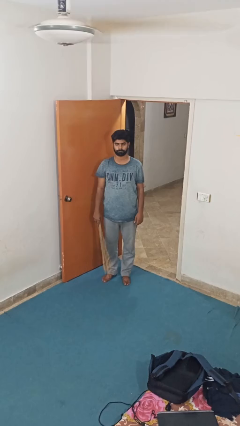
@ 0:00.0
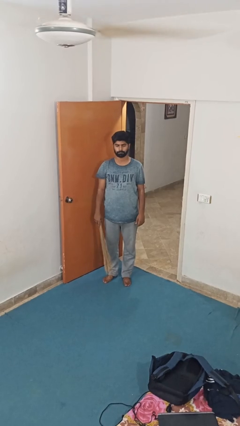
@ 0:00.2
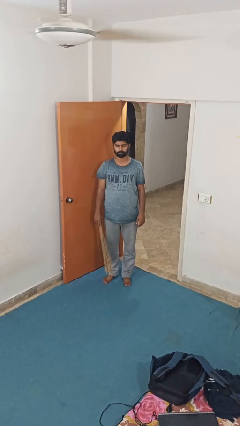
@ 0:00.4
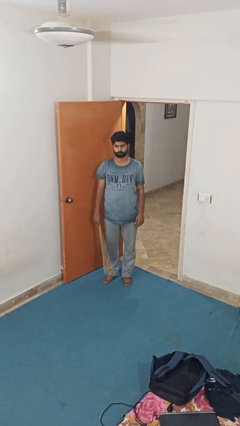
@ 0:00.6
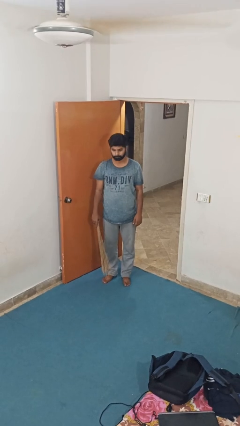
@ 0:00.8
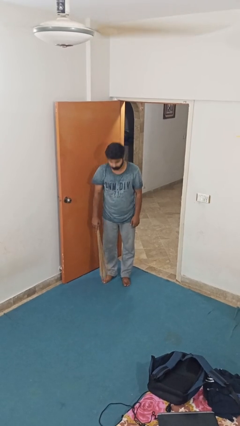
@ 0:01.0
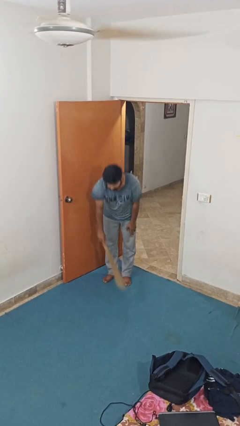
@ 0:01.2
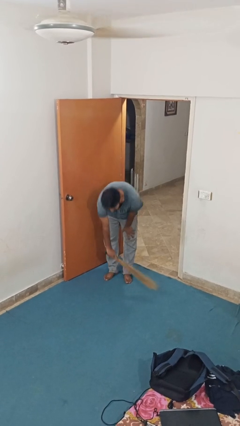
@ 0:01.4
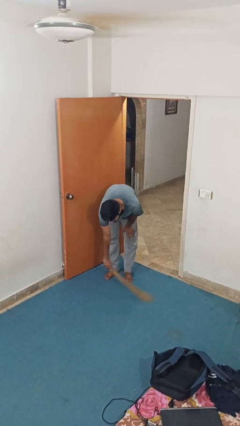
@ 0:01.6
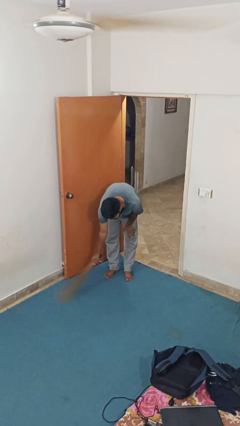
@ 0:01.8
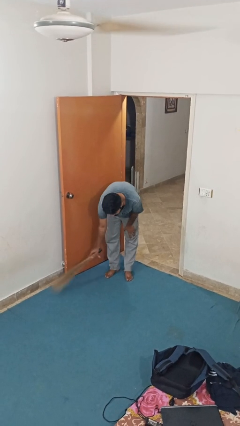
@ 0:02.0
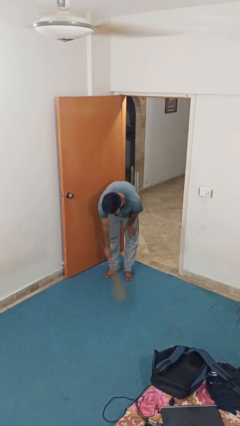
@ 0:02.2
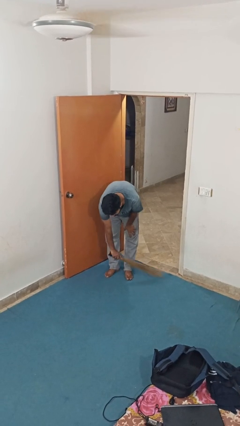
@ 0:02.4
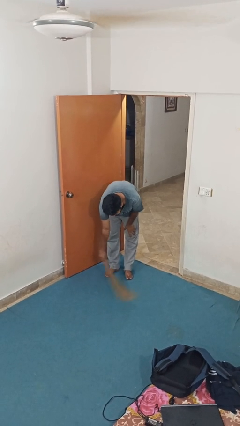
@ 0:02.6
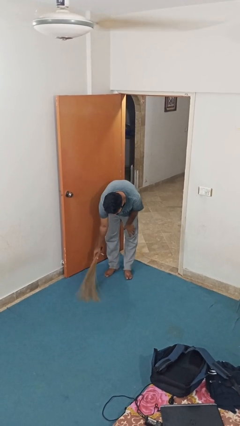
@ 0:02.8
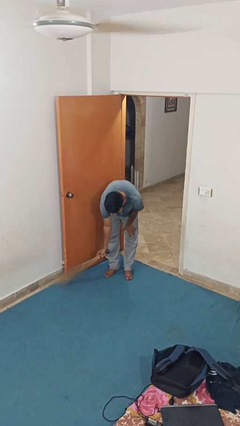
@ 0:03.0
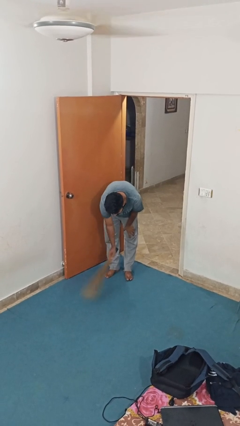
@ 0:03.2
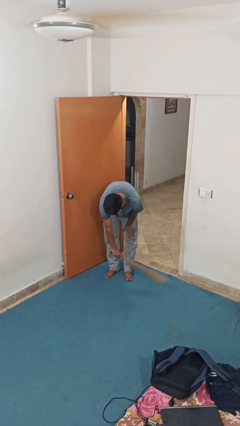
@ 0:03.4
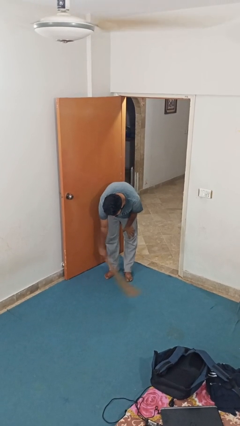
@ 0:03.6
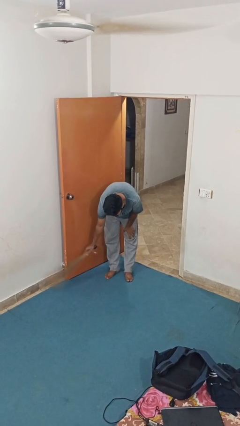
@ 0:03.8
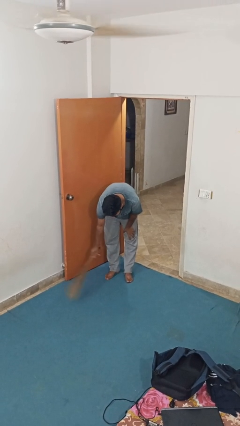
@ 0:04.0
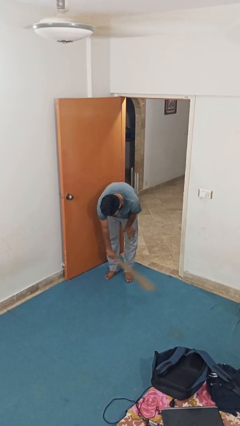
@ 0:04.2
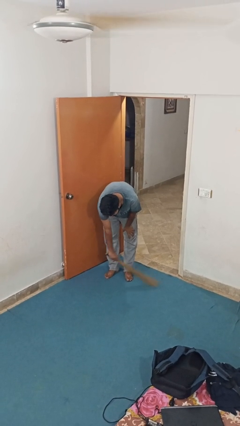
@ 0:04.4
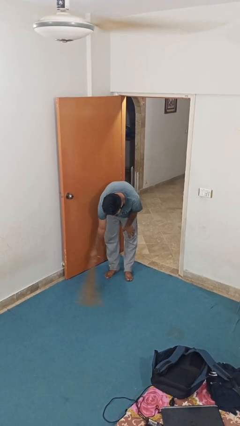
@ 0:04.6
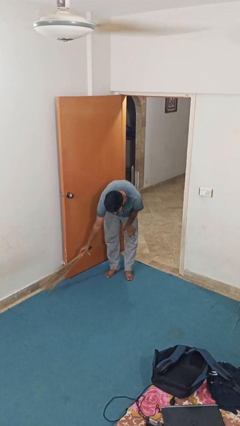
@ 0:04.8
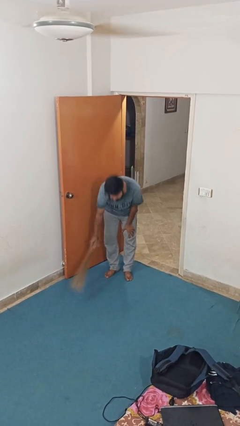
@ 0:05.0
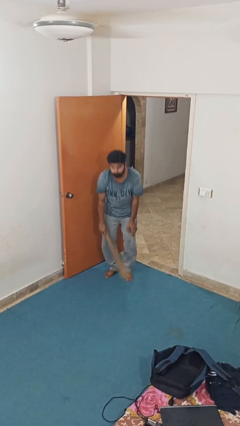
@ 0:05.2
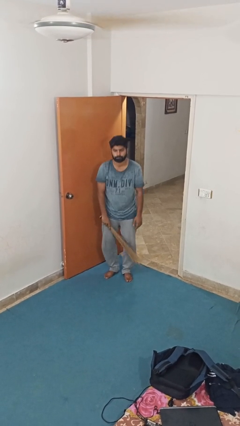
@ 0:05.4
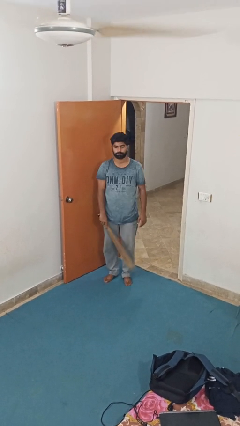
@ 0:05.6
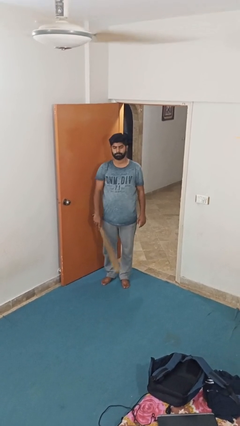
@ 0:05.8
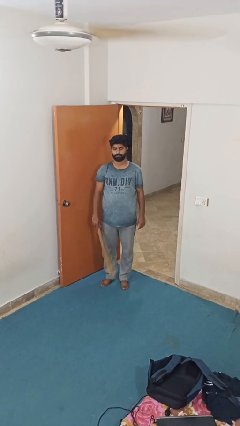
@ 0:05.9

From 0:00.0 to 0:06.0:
person sweeps floor

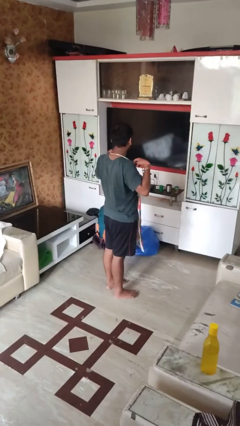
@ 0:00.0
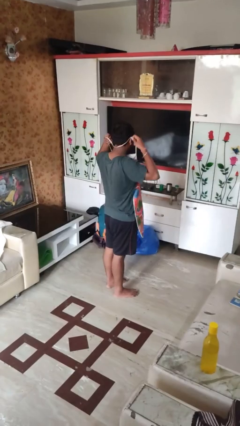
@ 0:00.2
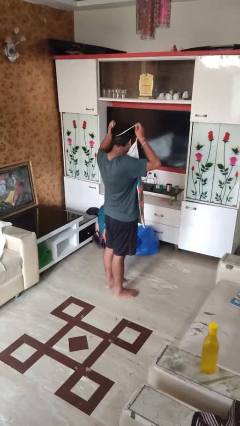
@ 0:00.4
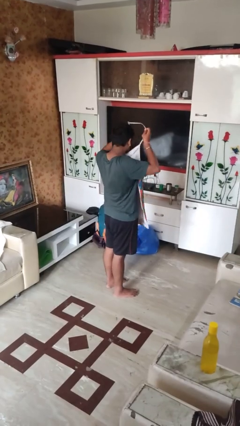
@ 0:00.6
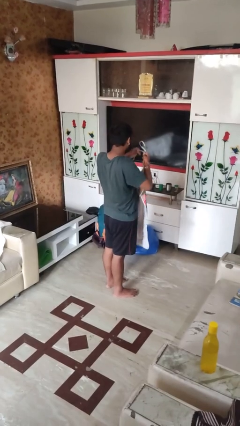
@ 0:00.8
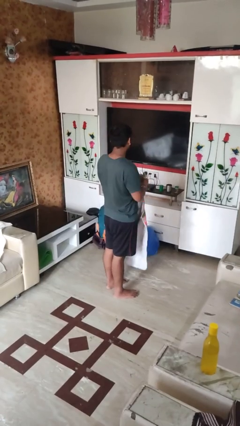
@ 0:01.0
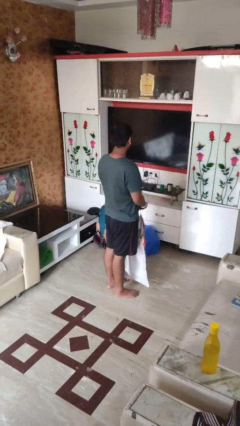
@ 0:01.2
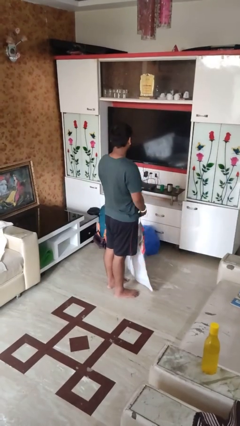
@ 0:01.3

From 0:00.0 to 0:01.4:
person takes off apron

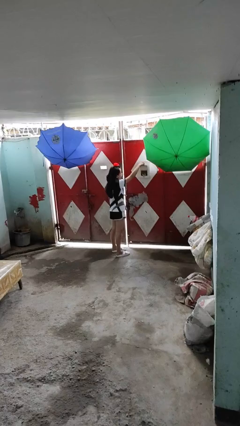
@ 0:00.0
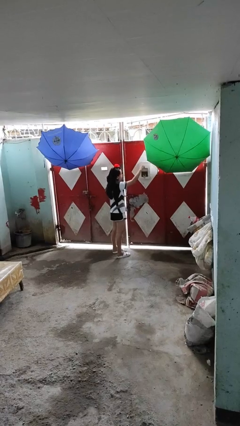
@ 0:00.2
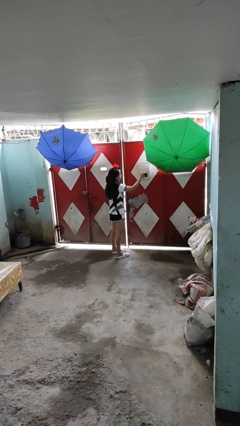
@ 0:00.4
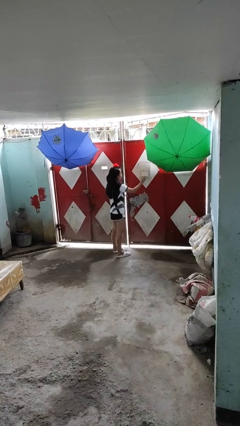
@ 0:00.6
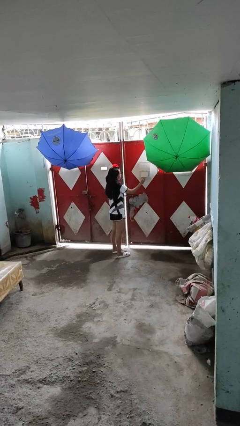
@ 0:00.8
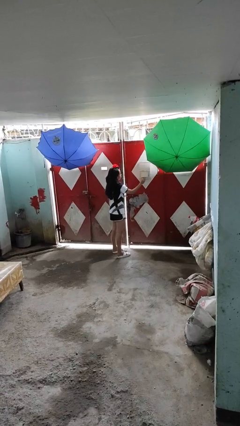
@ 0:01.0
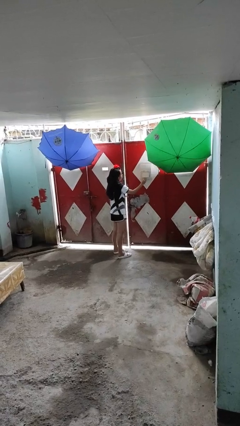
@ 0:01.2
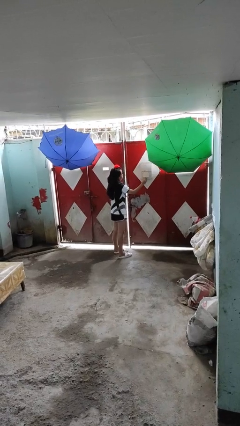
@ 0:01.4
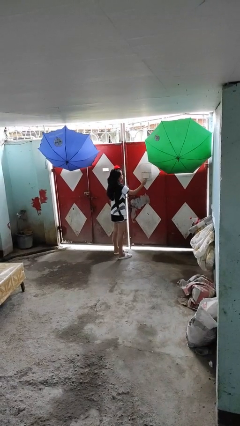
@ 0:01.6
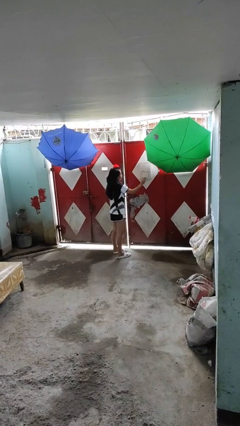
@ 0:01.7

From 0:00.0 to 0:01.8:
person closes mailbox

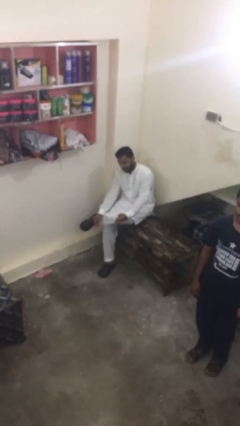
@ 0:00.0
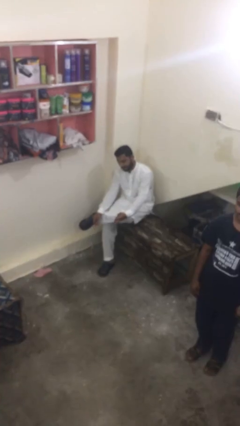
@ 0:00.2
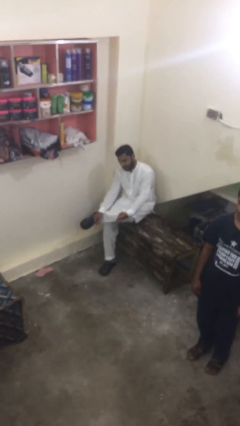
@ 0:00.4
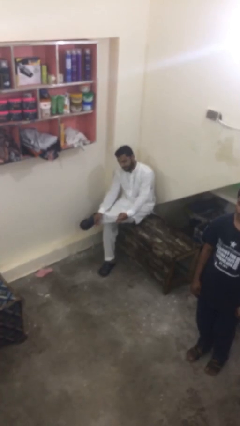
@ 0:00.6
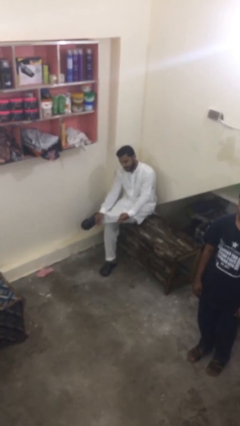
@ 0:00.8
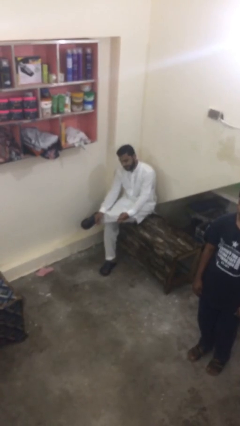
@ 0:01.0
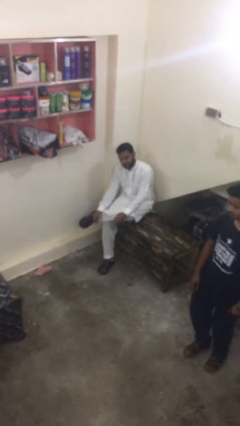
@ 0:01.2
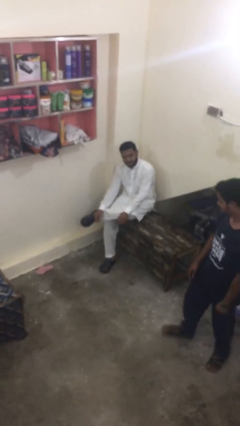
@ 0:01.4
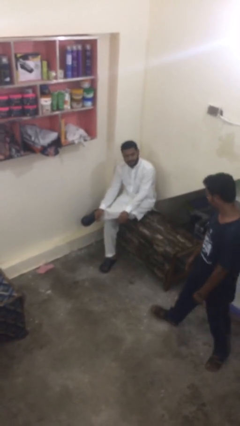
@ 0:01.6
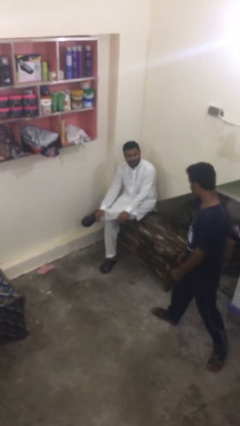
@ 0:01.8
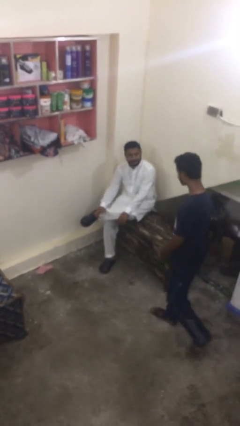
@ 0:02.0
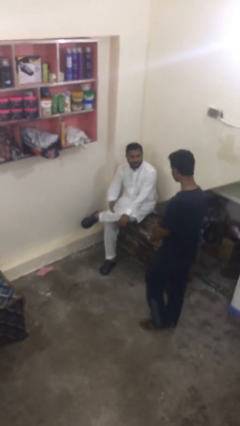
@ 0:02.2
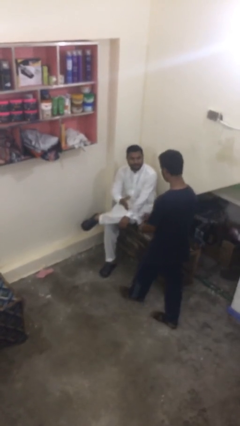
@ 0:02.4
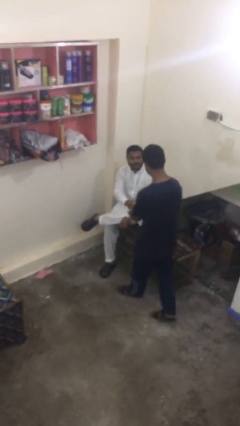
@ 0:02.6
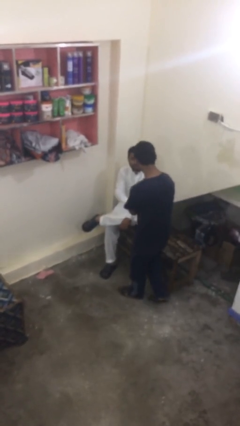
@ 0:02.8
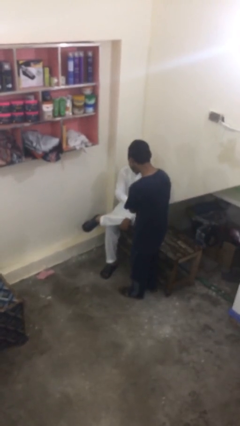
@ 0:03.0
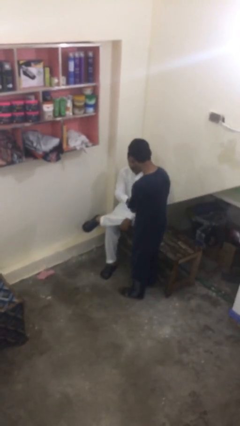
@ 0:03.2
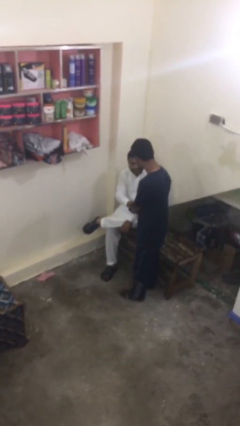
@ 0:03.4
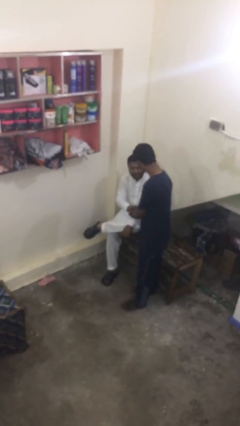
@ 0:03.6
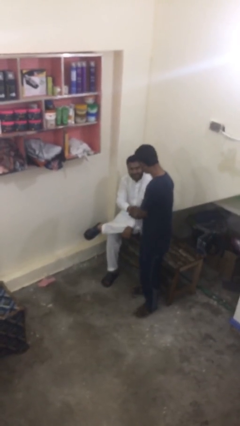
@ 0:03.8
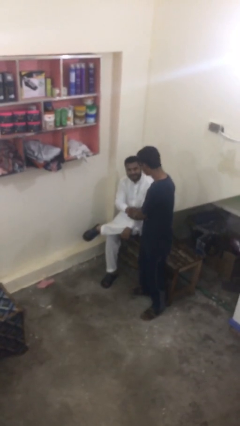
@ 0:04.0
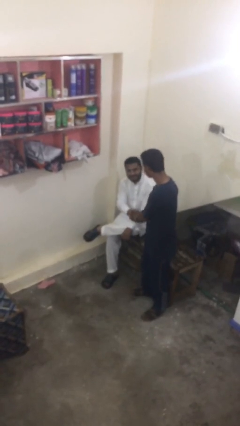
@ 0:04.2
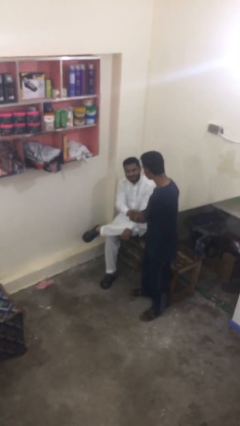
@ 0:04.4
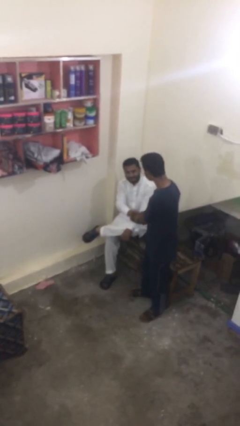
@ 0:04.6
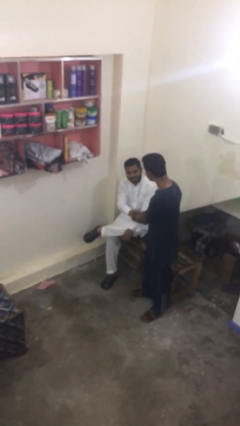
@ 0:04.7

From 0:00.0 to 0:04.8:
person shakes hand

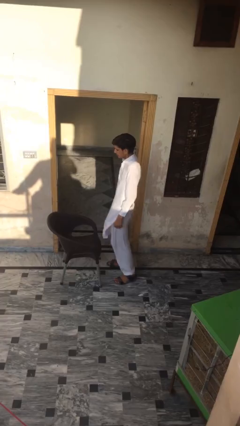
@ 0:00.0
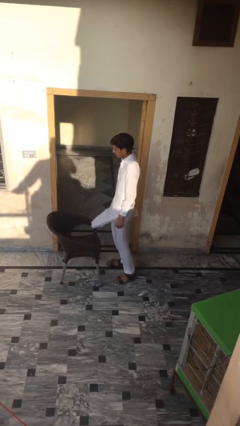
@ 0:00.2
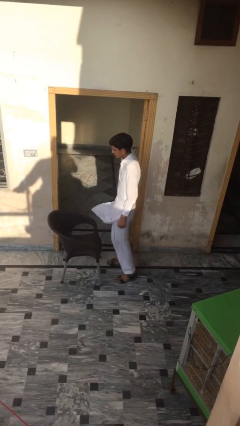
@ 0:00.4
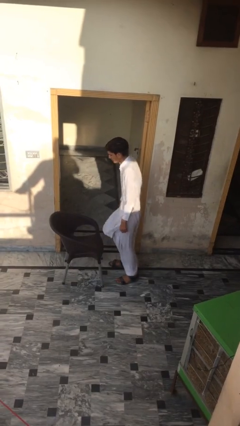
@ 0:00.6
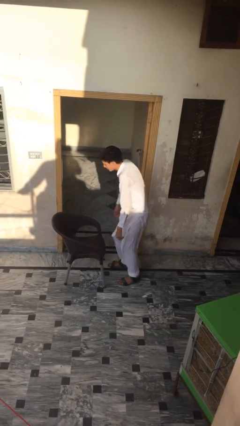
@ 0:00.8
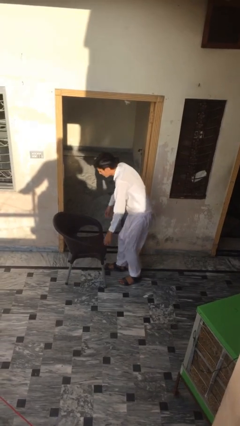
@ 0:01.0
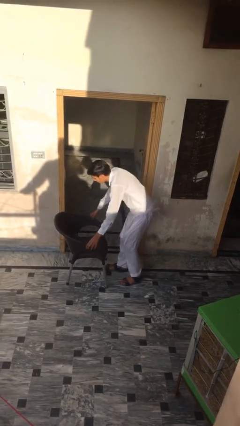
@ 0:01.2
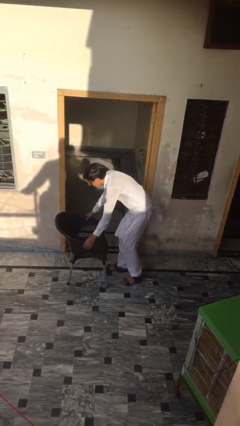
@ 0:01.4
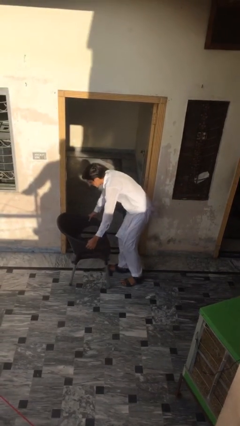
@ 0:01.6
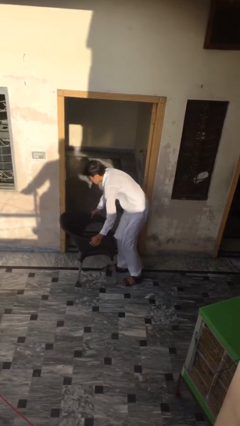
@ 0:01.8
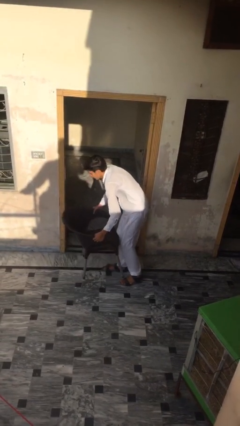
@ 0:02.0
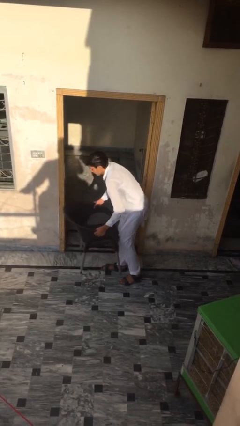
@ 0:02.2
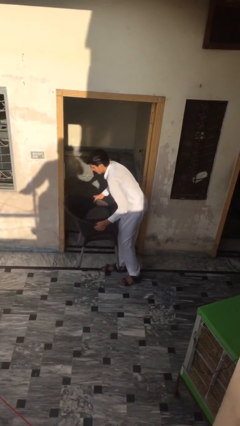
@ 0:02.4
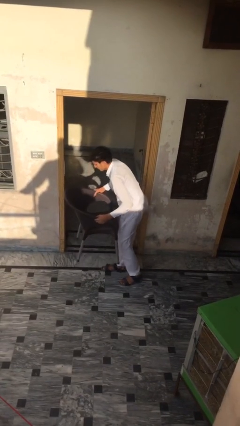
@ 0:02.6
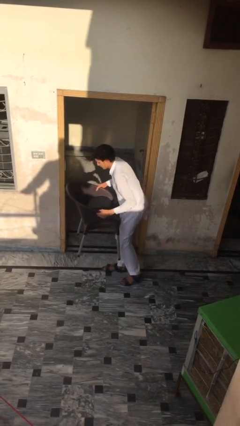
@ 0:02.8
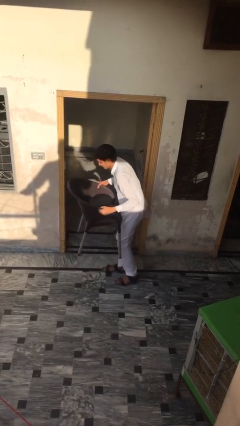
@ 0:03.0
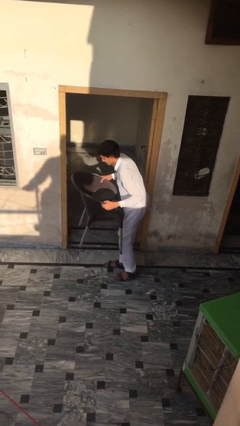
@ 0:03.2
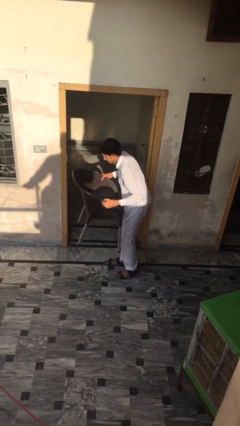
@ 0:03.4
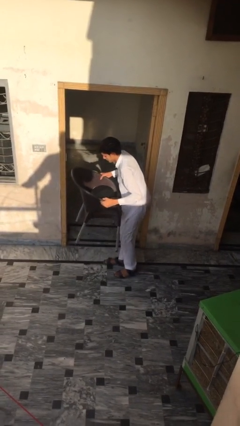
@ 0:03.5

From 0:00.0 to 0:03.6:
person picks up object from floor
